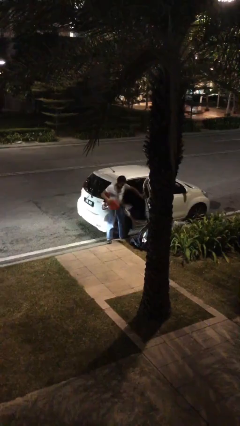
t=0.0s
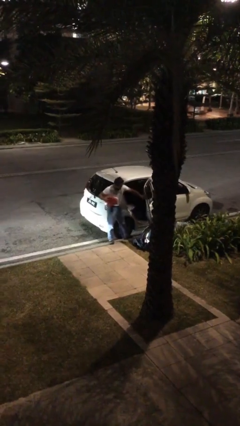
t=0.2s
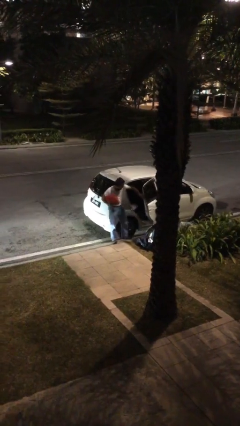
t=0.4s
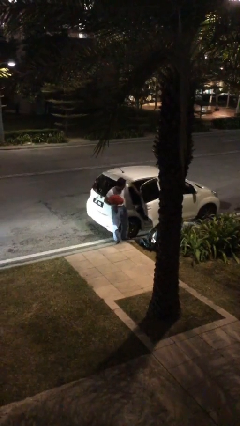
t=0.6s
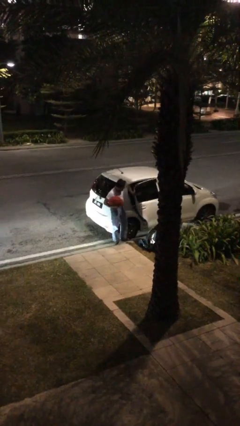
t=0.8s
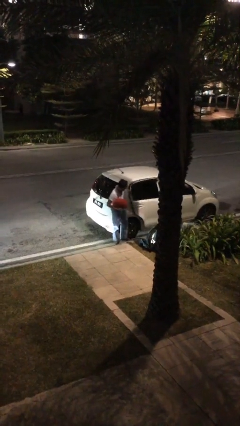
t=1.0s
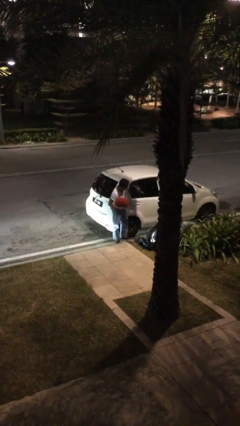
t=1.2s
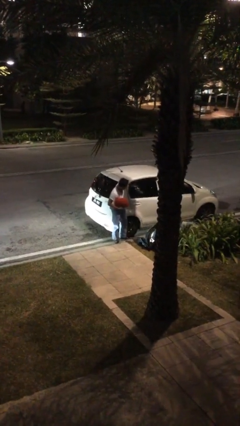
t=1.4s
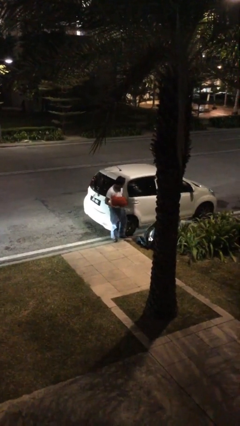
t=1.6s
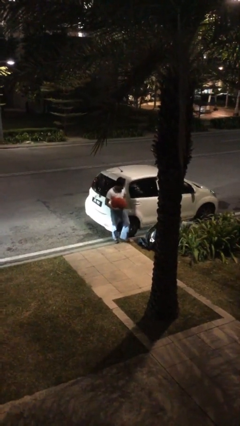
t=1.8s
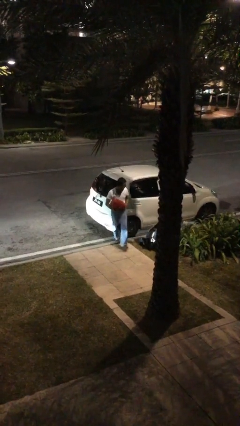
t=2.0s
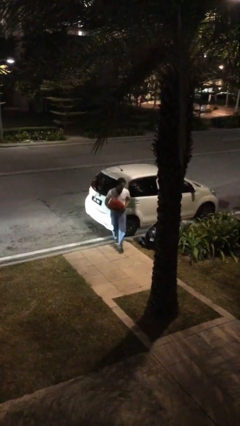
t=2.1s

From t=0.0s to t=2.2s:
person closes car door

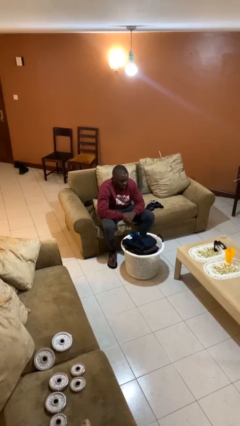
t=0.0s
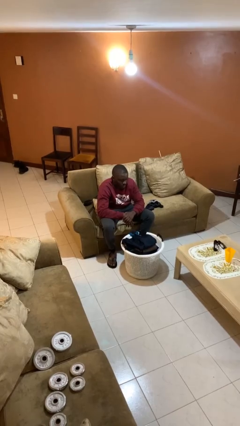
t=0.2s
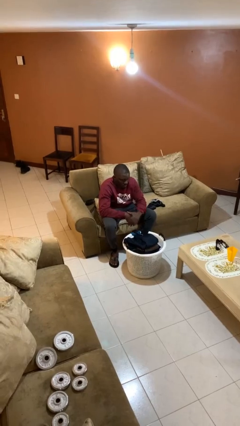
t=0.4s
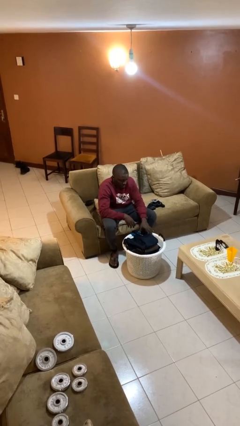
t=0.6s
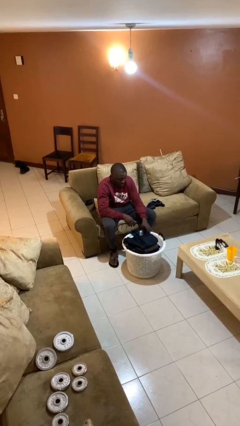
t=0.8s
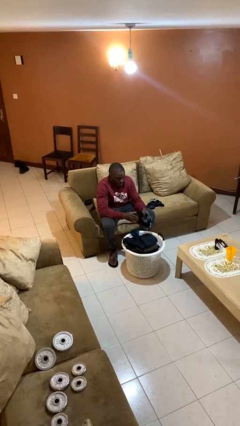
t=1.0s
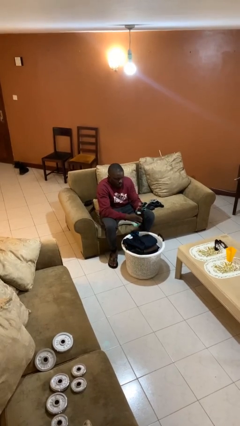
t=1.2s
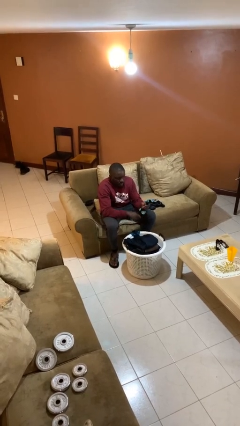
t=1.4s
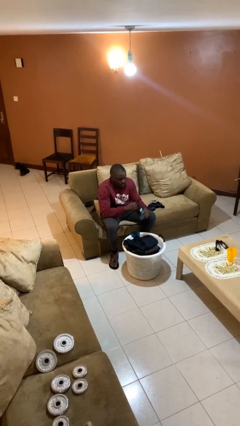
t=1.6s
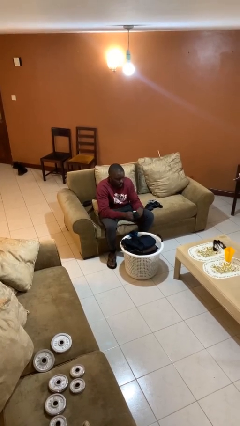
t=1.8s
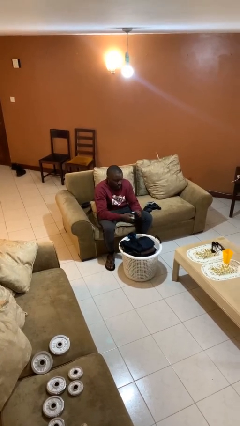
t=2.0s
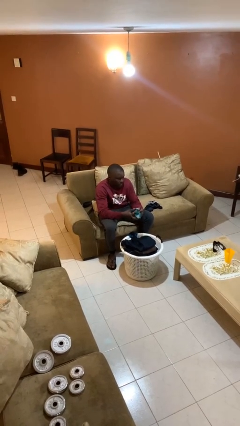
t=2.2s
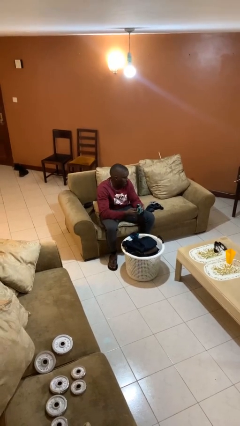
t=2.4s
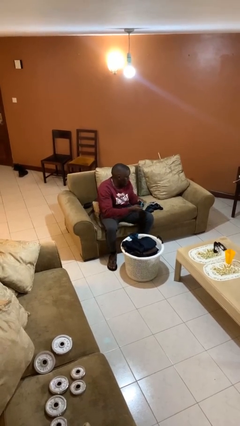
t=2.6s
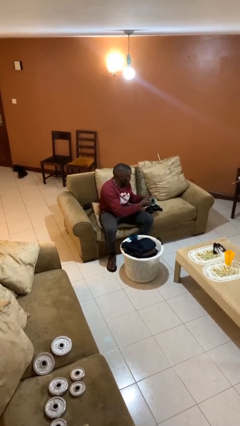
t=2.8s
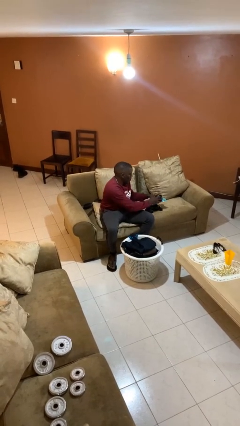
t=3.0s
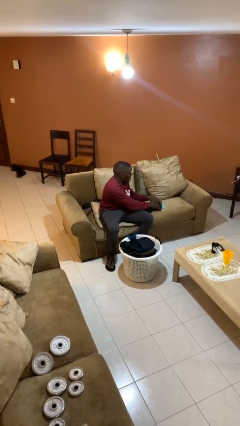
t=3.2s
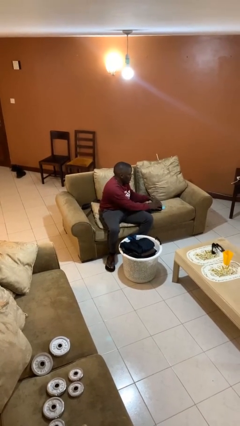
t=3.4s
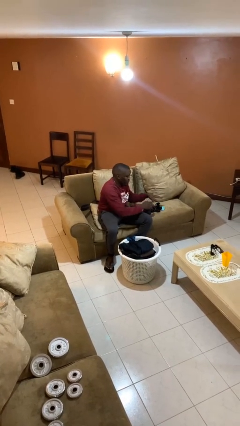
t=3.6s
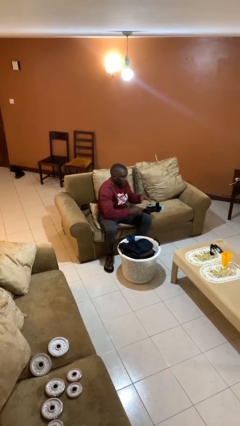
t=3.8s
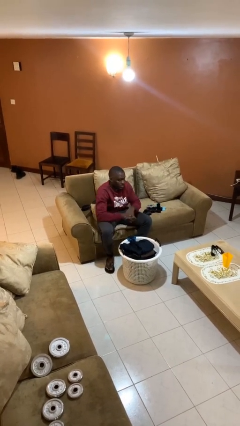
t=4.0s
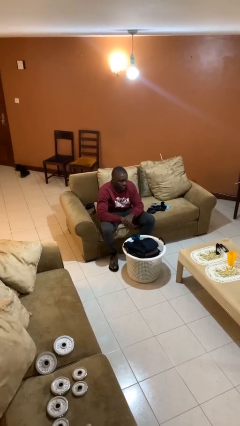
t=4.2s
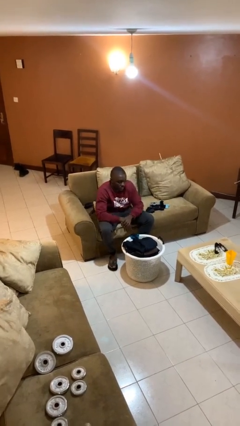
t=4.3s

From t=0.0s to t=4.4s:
person folds socks

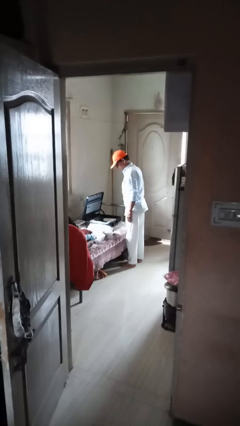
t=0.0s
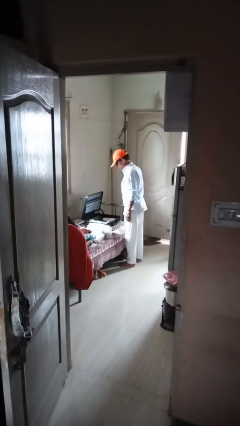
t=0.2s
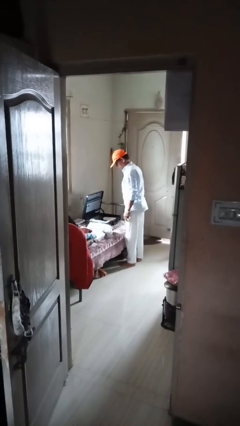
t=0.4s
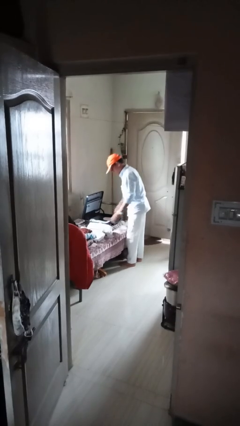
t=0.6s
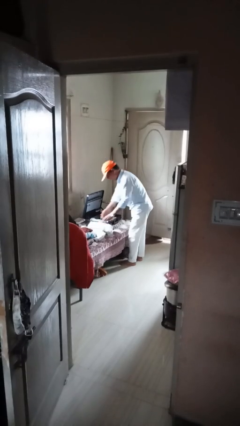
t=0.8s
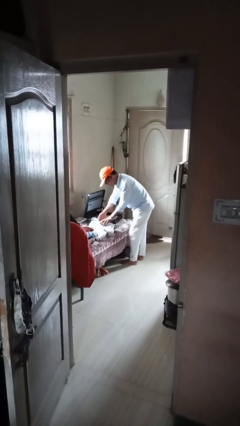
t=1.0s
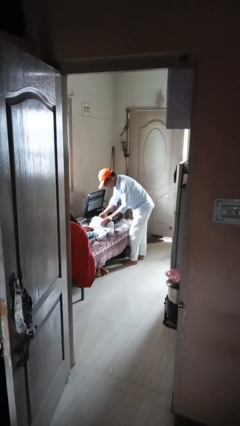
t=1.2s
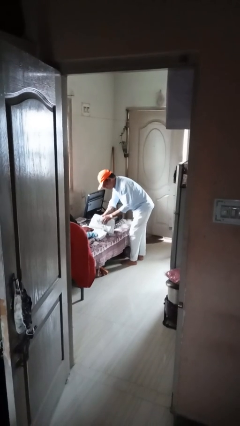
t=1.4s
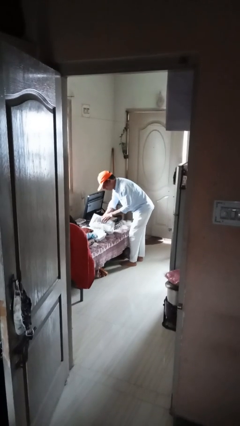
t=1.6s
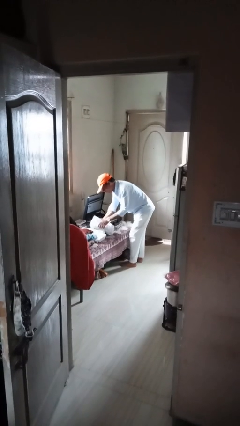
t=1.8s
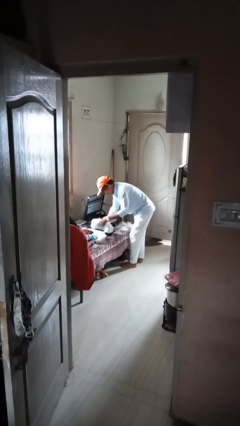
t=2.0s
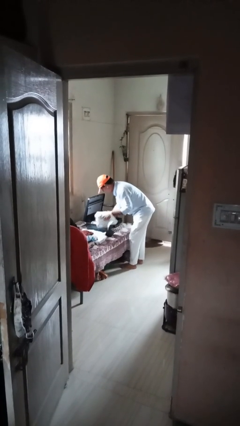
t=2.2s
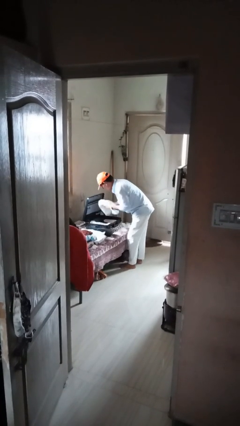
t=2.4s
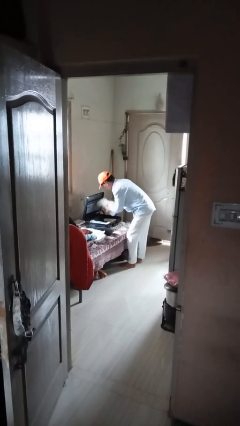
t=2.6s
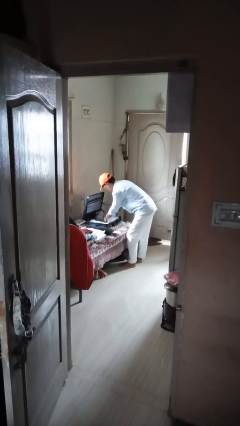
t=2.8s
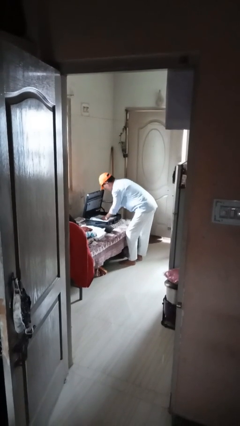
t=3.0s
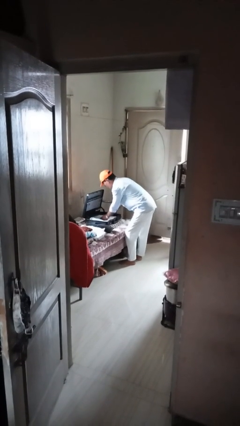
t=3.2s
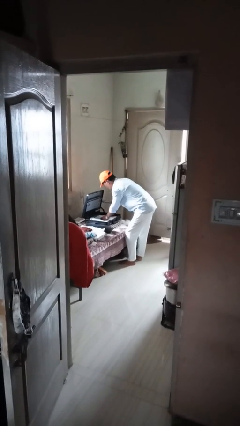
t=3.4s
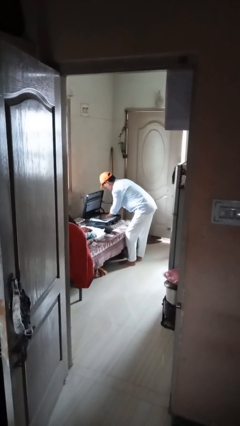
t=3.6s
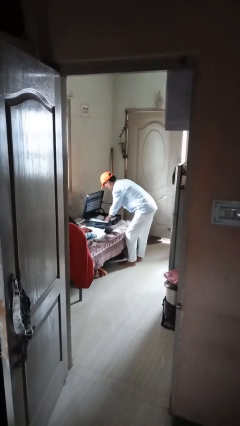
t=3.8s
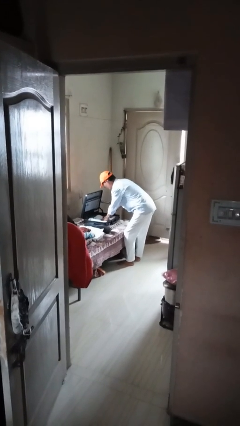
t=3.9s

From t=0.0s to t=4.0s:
person loads clothes into suitcase

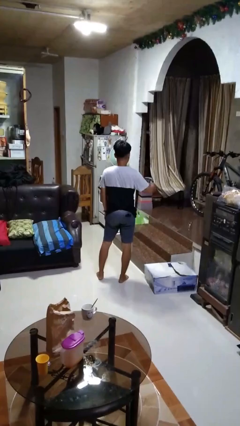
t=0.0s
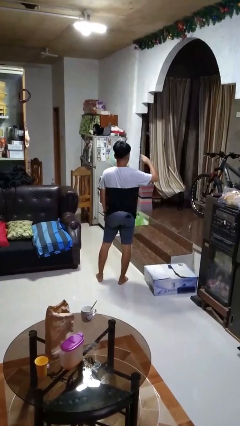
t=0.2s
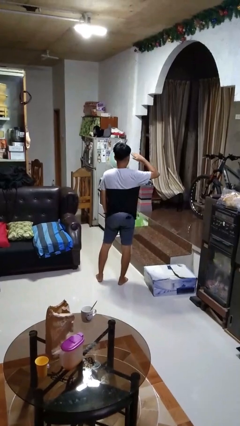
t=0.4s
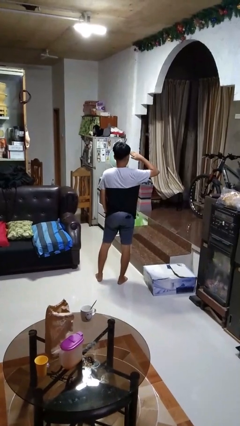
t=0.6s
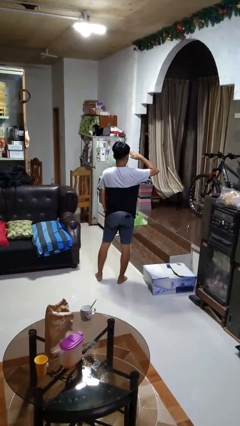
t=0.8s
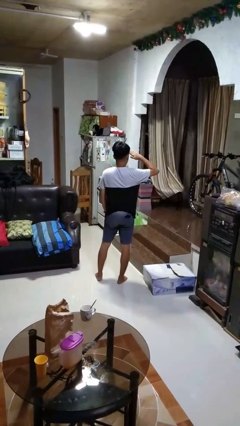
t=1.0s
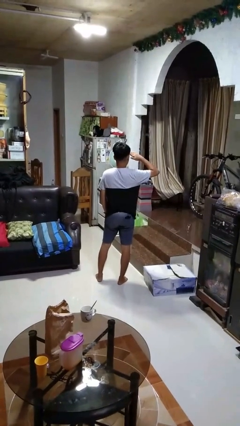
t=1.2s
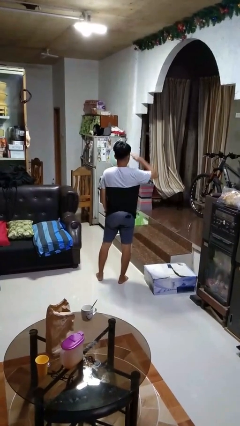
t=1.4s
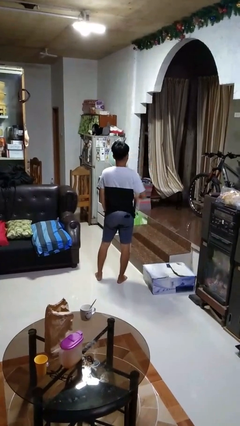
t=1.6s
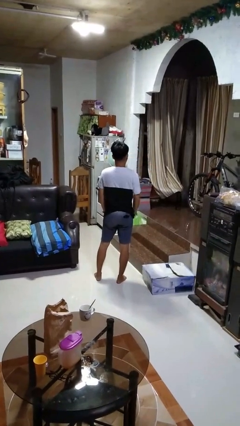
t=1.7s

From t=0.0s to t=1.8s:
person salutes

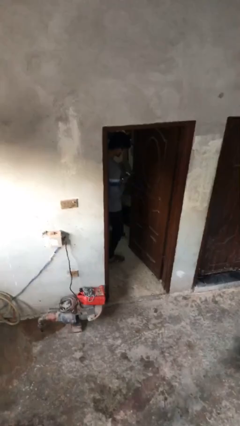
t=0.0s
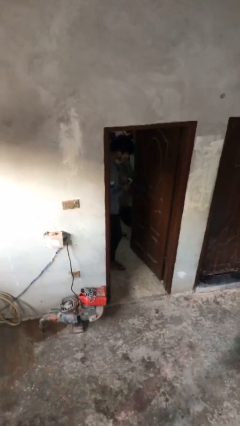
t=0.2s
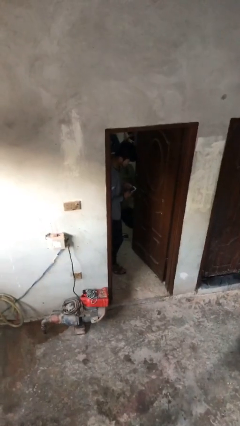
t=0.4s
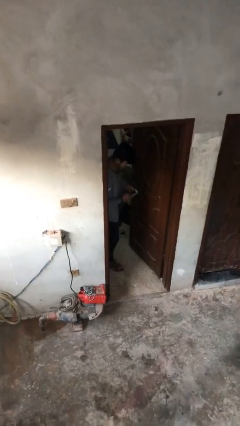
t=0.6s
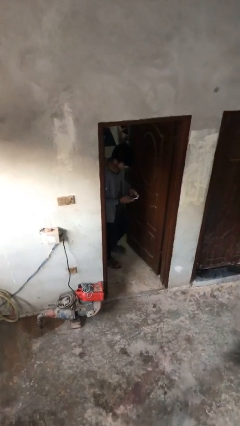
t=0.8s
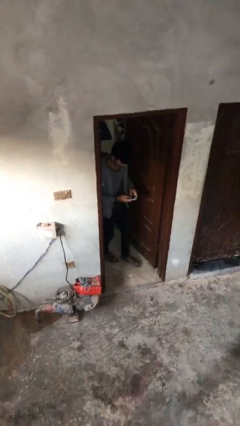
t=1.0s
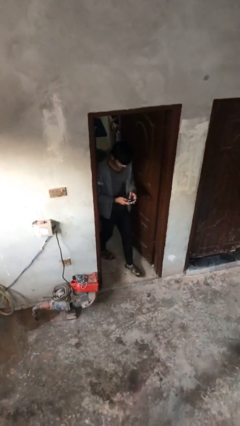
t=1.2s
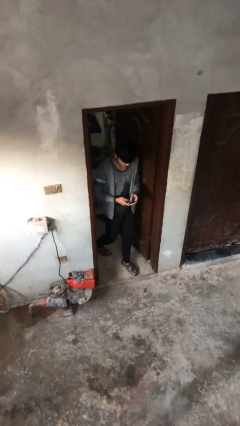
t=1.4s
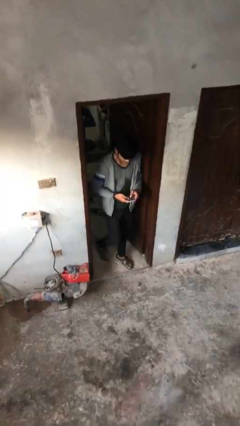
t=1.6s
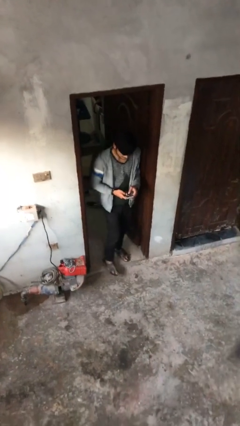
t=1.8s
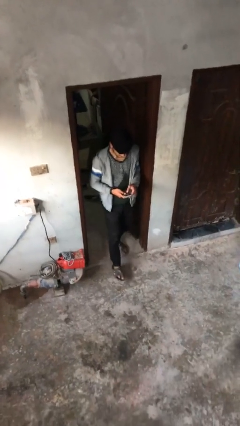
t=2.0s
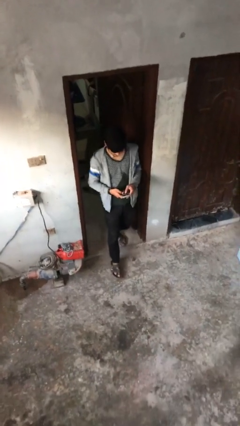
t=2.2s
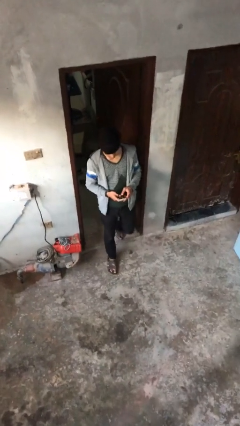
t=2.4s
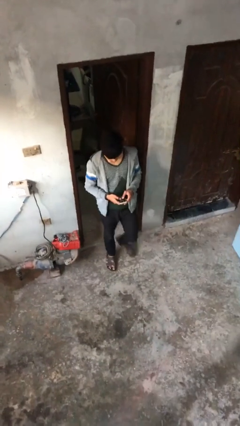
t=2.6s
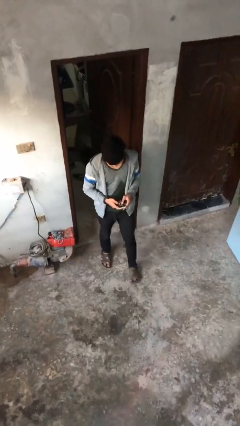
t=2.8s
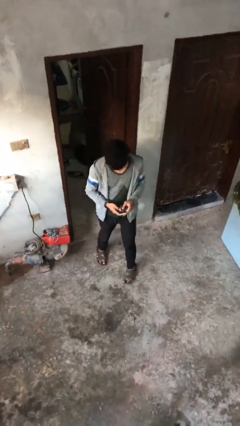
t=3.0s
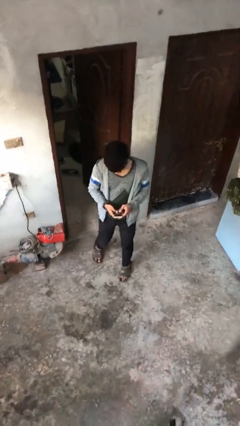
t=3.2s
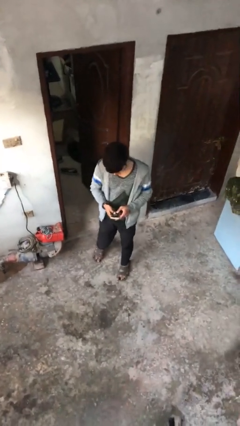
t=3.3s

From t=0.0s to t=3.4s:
person exits scene through structure

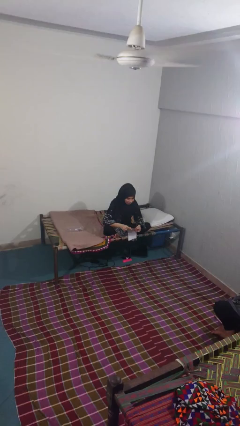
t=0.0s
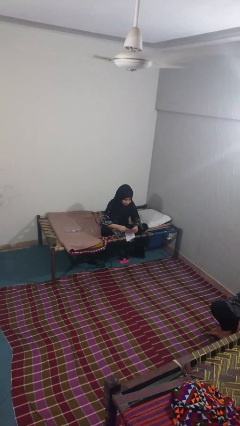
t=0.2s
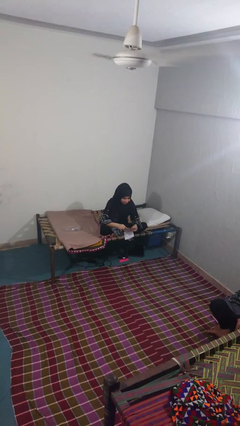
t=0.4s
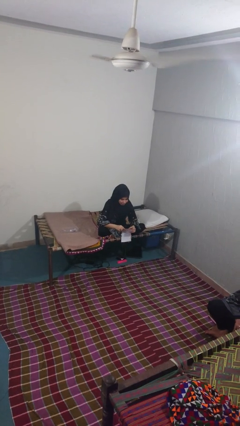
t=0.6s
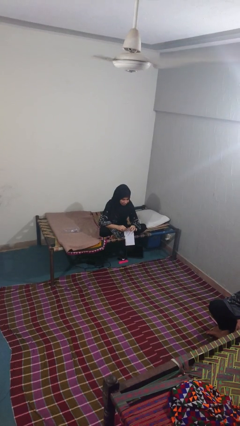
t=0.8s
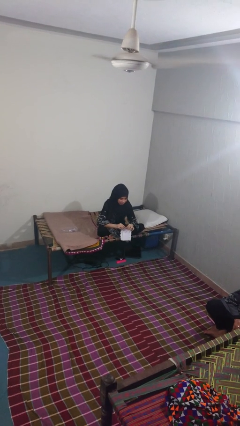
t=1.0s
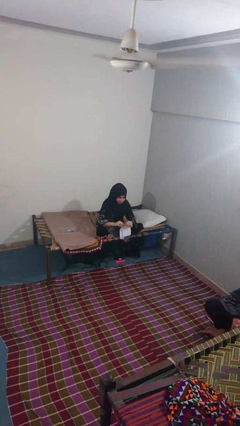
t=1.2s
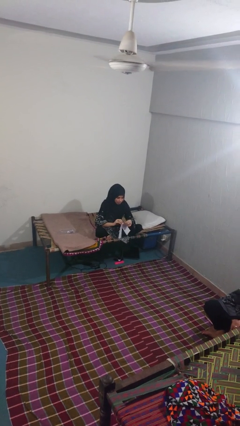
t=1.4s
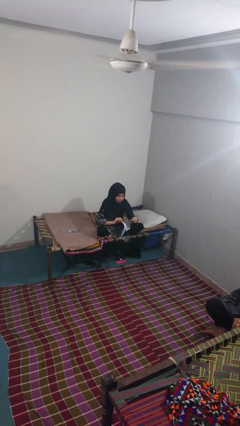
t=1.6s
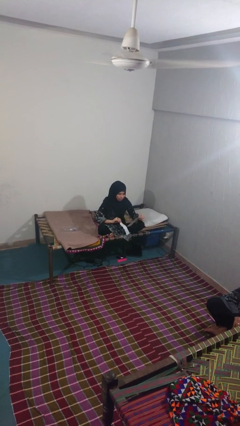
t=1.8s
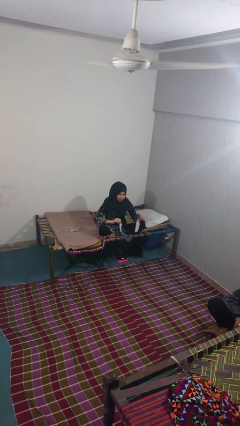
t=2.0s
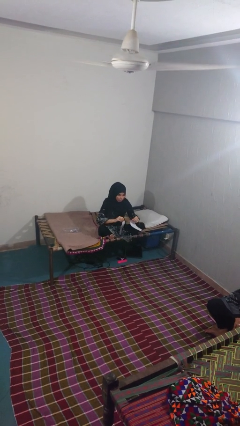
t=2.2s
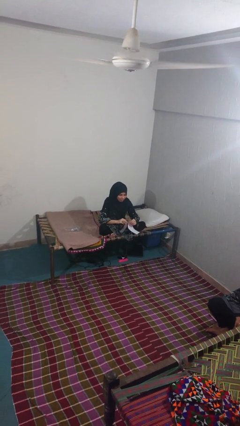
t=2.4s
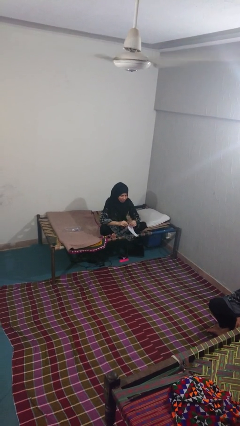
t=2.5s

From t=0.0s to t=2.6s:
person tears paper
